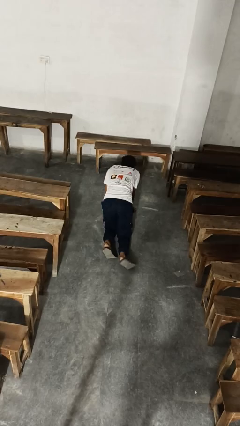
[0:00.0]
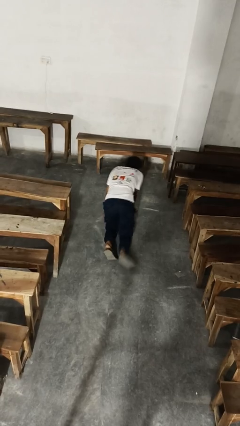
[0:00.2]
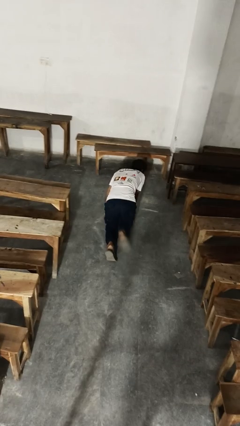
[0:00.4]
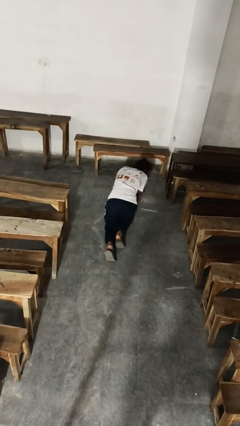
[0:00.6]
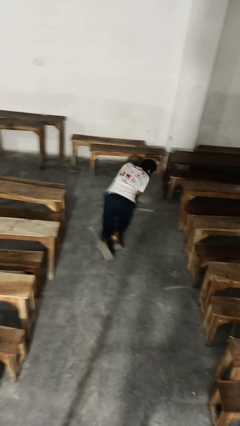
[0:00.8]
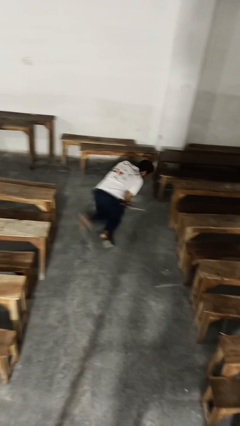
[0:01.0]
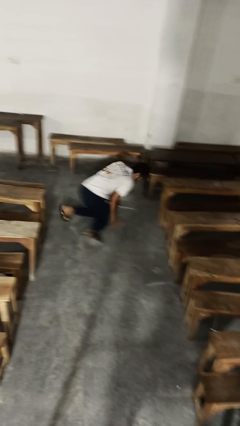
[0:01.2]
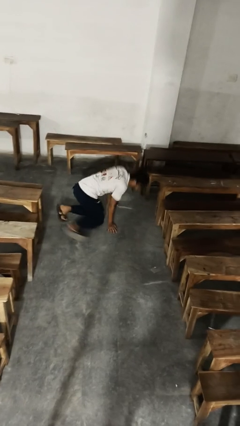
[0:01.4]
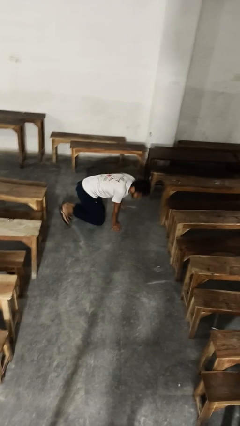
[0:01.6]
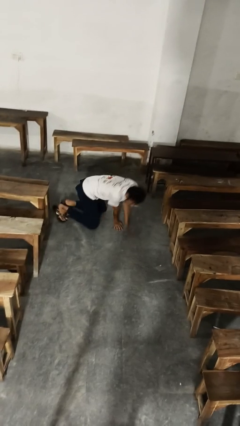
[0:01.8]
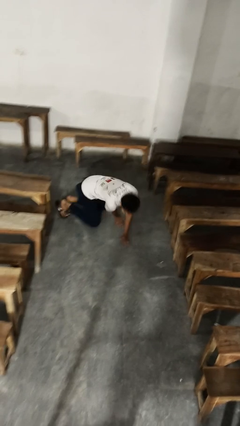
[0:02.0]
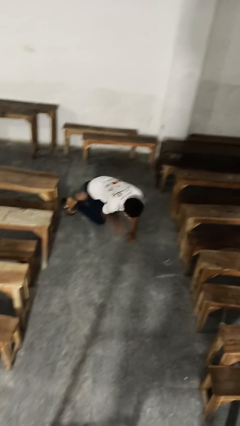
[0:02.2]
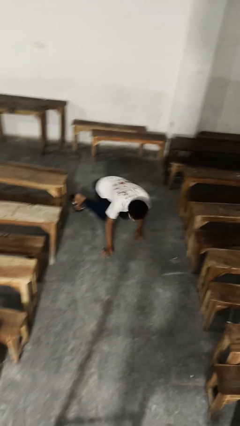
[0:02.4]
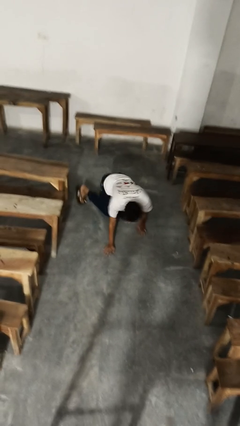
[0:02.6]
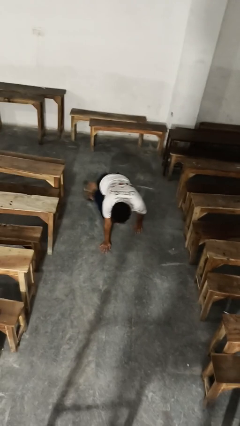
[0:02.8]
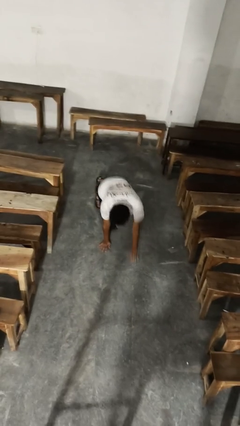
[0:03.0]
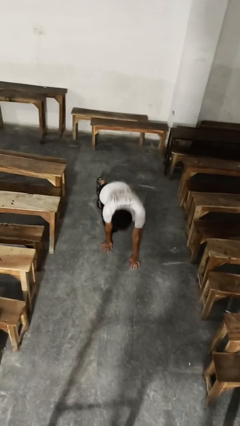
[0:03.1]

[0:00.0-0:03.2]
person crawls

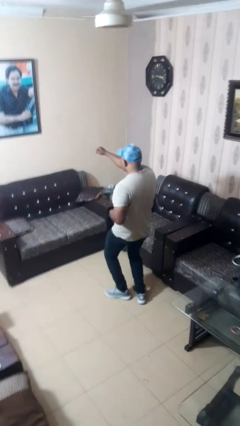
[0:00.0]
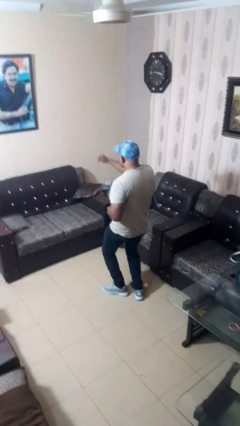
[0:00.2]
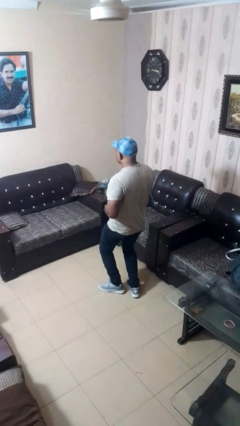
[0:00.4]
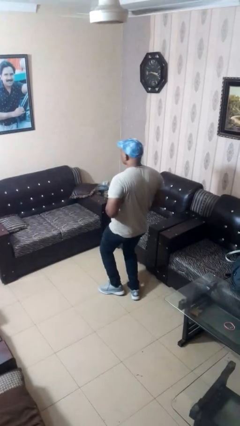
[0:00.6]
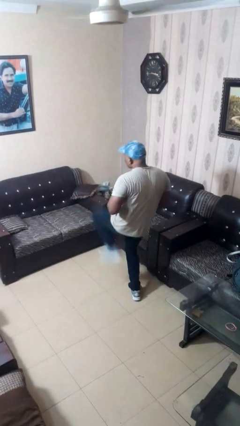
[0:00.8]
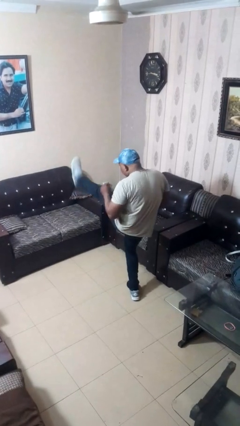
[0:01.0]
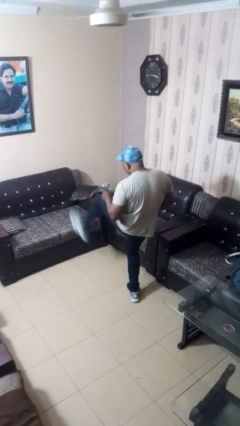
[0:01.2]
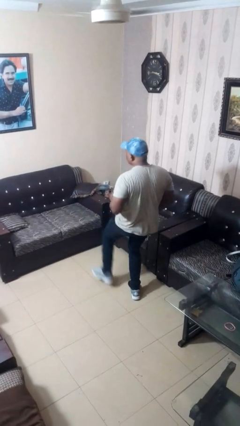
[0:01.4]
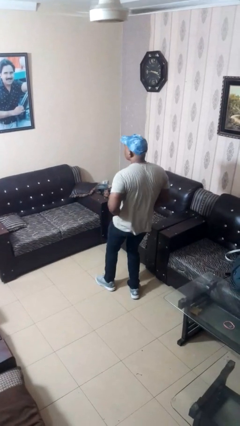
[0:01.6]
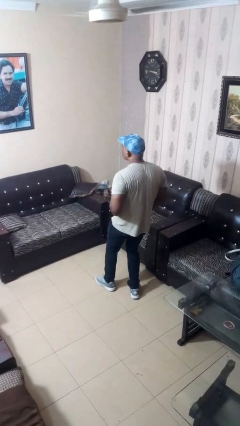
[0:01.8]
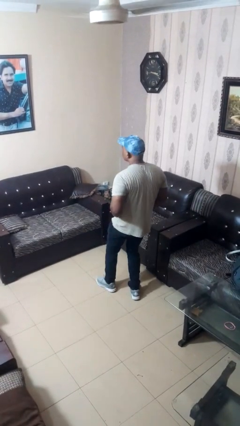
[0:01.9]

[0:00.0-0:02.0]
person karate kicks

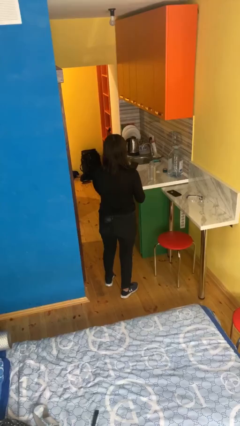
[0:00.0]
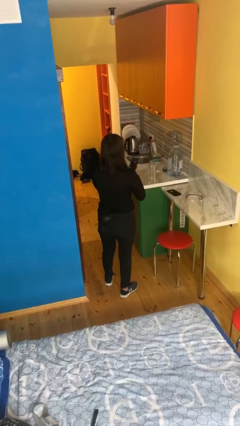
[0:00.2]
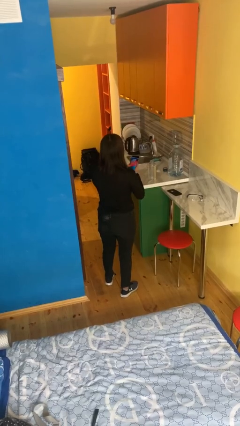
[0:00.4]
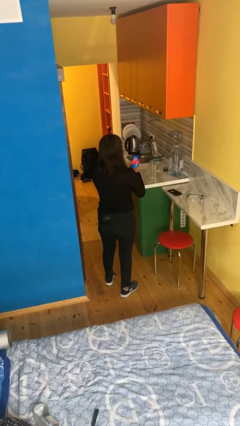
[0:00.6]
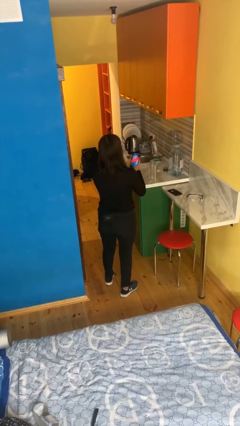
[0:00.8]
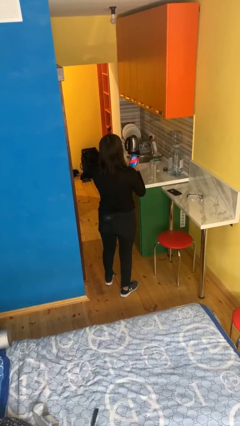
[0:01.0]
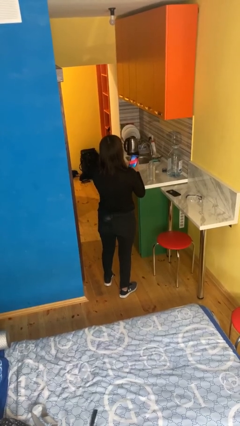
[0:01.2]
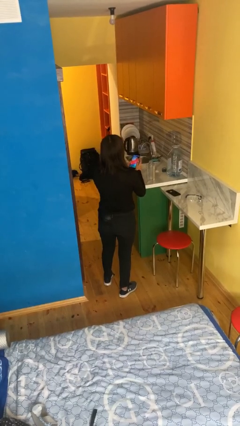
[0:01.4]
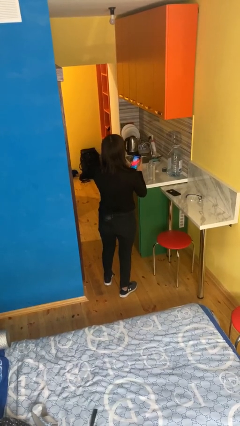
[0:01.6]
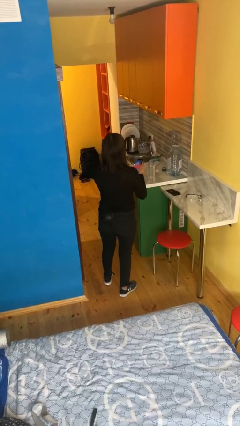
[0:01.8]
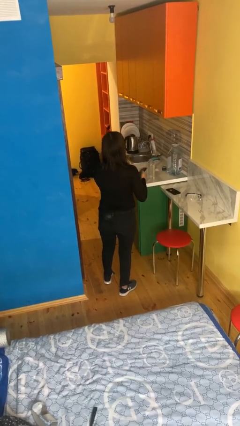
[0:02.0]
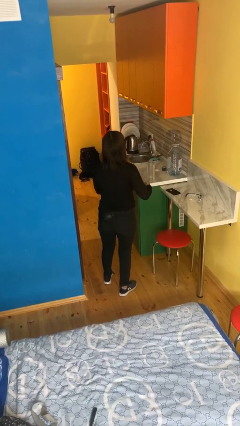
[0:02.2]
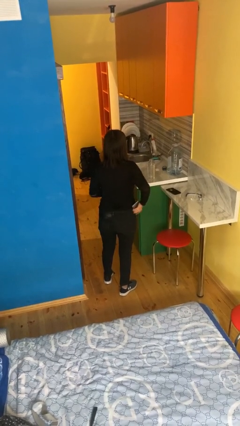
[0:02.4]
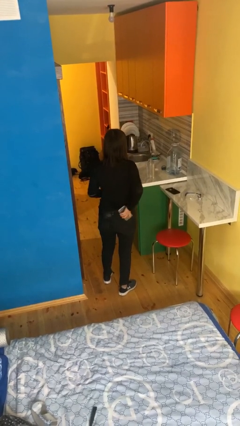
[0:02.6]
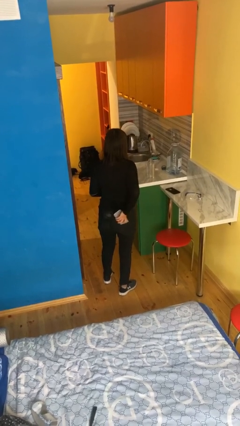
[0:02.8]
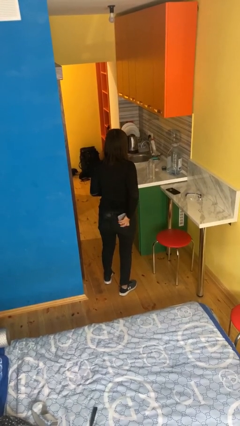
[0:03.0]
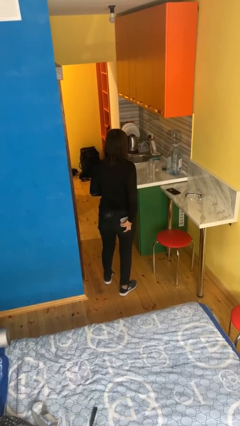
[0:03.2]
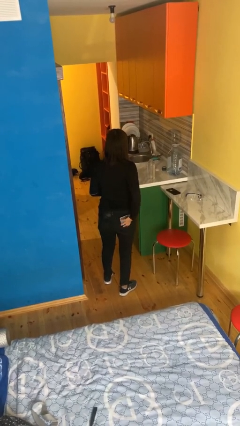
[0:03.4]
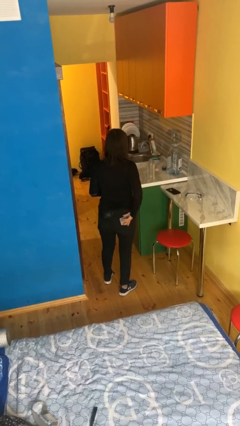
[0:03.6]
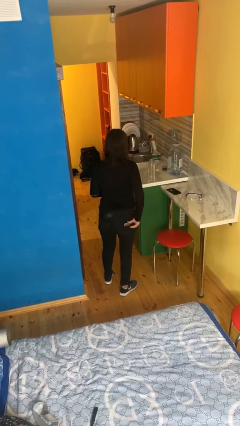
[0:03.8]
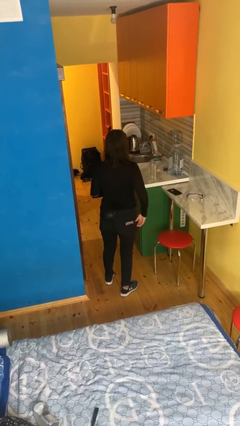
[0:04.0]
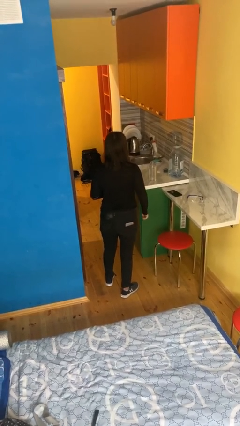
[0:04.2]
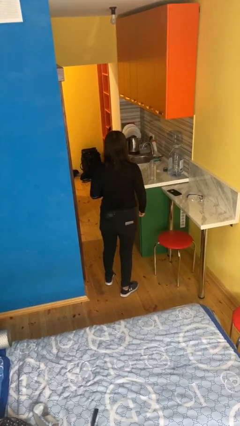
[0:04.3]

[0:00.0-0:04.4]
person puts phone into pocket

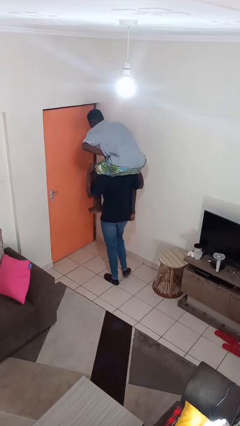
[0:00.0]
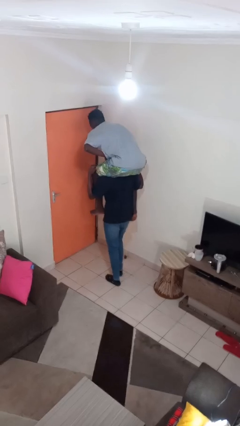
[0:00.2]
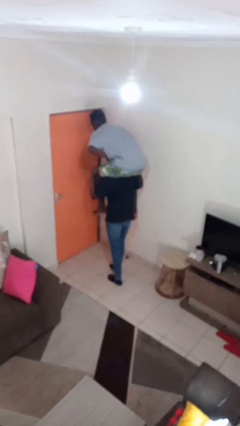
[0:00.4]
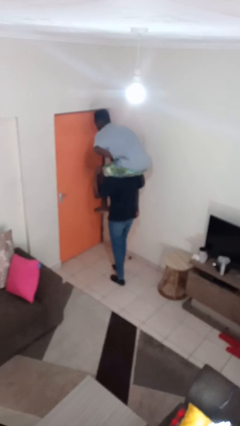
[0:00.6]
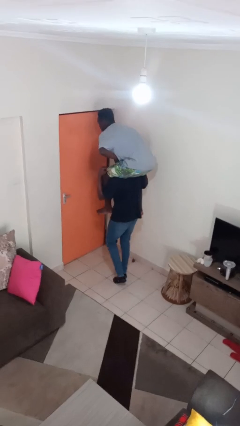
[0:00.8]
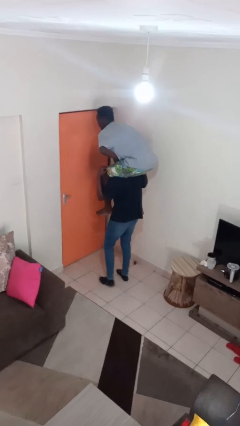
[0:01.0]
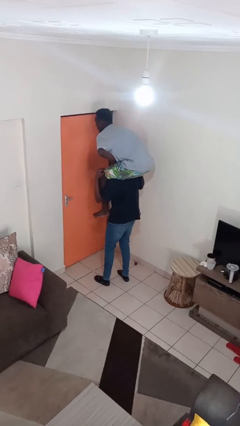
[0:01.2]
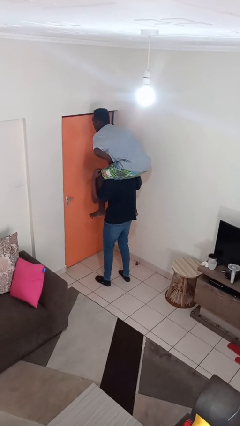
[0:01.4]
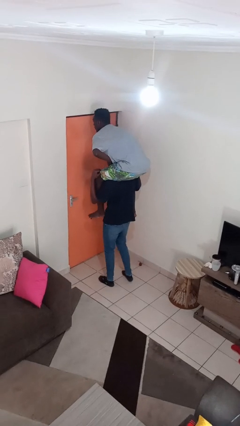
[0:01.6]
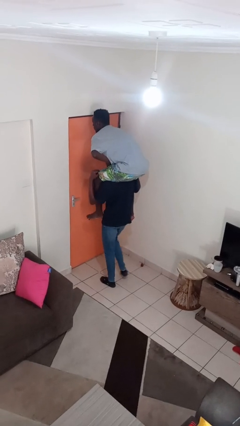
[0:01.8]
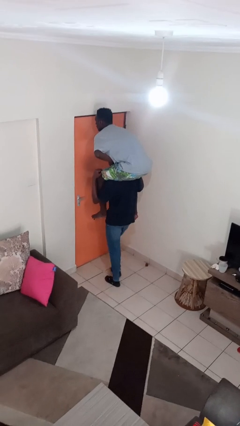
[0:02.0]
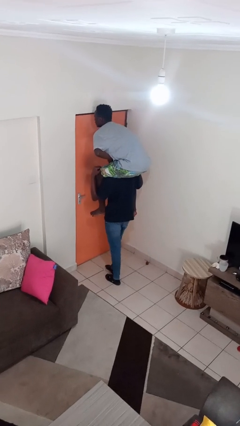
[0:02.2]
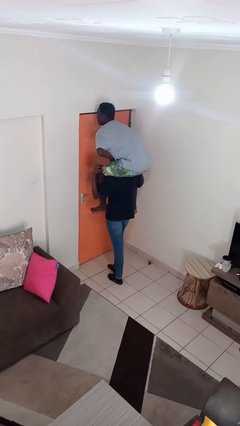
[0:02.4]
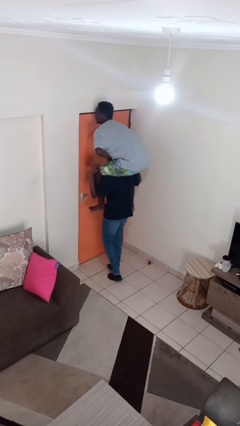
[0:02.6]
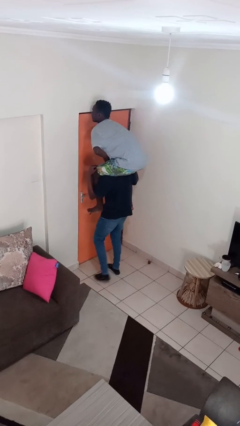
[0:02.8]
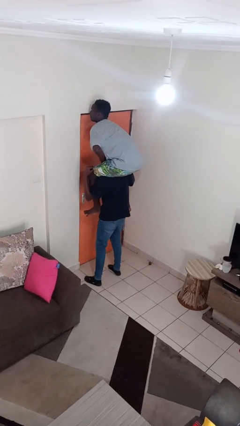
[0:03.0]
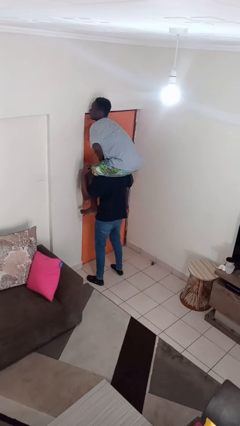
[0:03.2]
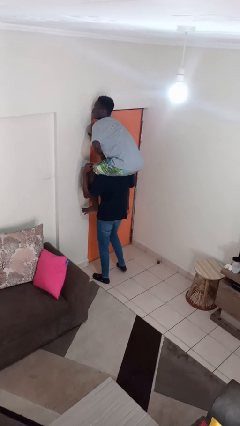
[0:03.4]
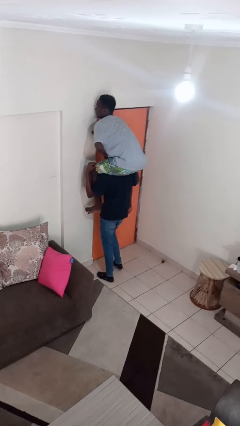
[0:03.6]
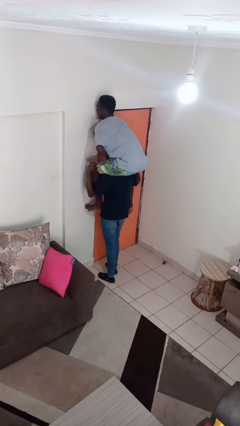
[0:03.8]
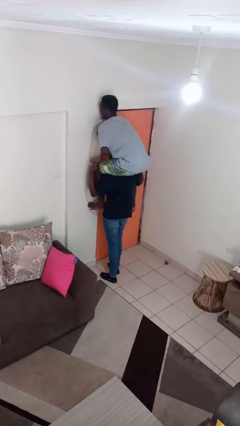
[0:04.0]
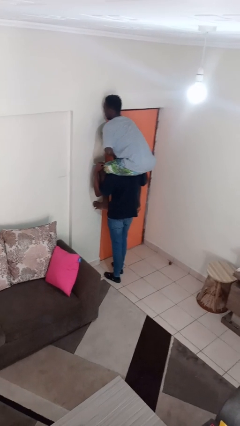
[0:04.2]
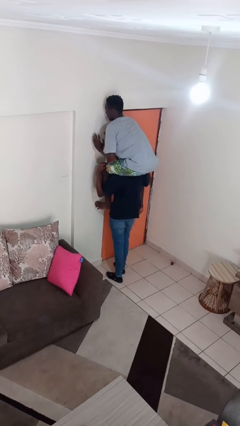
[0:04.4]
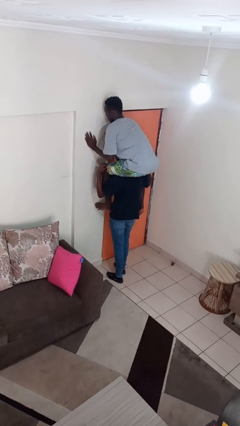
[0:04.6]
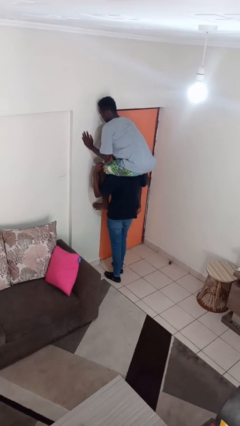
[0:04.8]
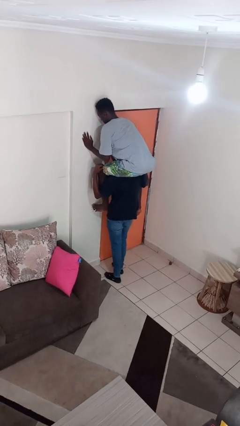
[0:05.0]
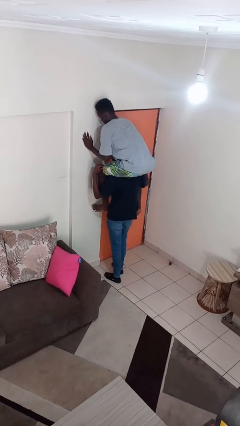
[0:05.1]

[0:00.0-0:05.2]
person carries person on shoulders

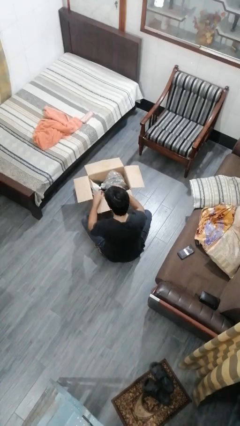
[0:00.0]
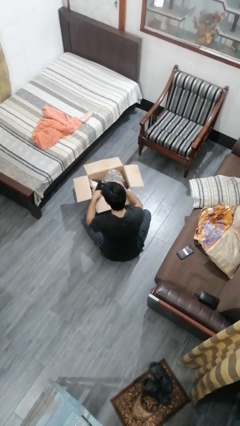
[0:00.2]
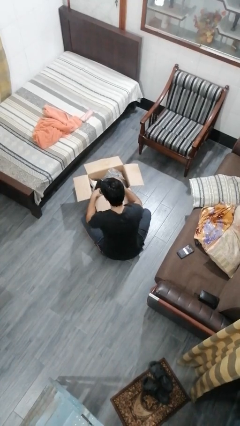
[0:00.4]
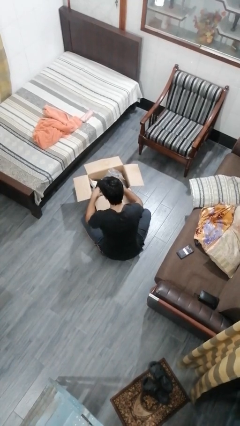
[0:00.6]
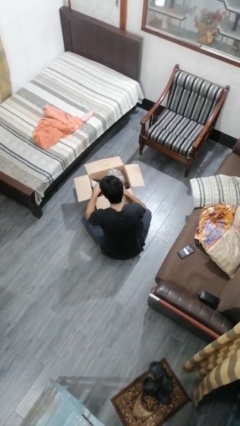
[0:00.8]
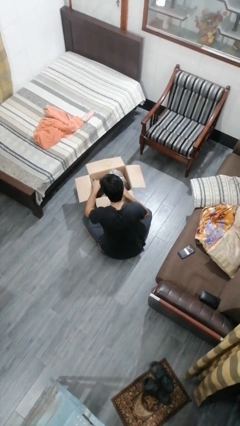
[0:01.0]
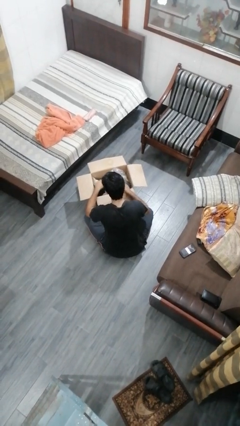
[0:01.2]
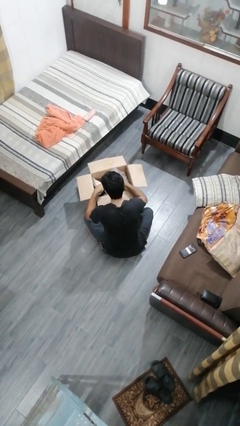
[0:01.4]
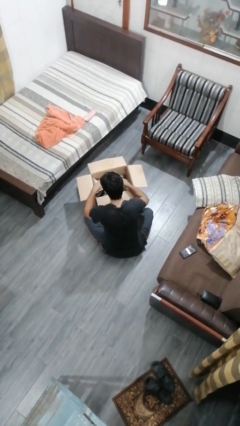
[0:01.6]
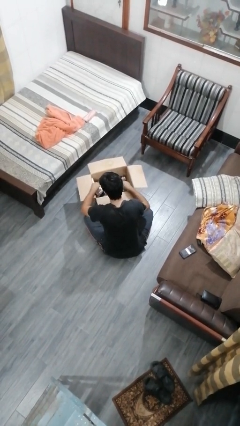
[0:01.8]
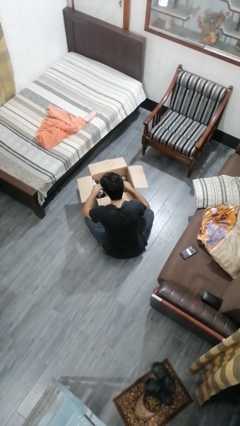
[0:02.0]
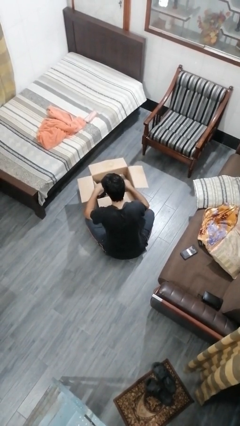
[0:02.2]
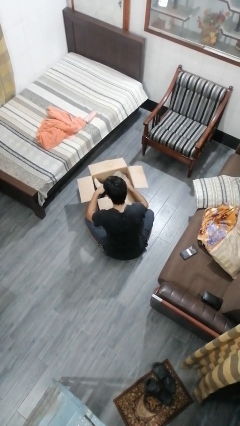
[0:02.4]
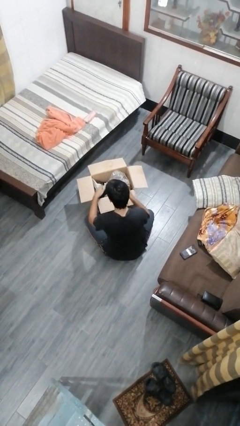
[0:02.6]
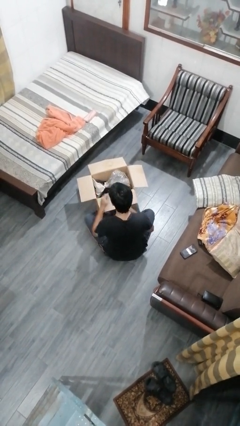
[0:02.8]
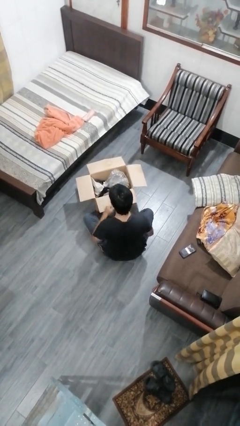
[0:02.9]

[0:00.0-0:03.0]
person searches in box
